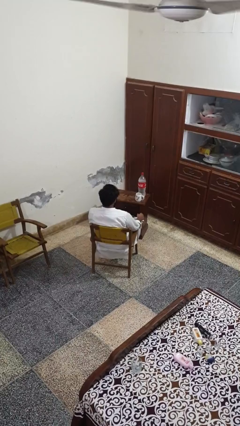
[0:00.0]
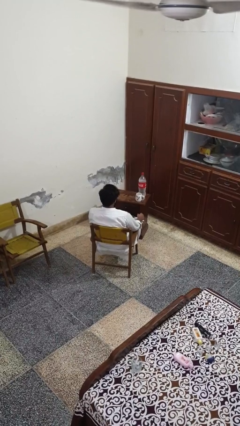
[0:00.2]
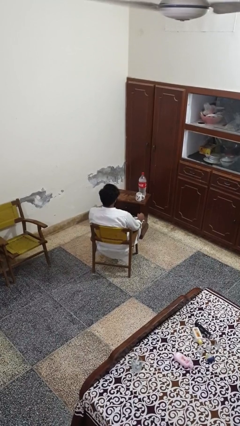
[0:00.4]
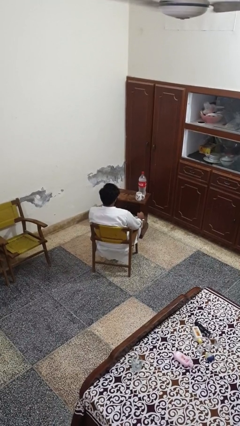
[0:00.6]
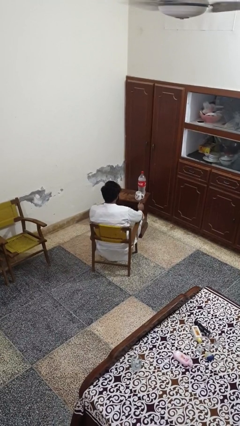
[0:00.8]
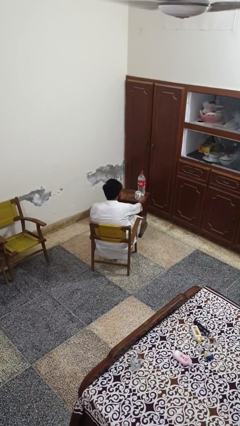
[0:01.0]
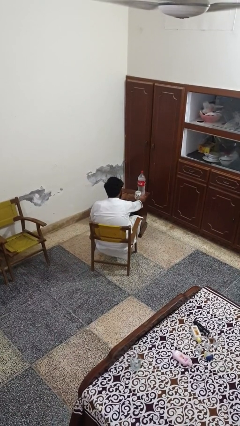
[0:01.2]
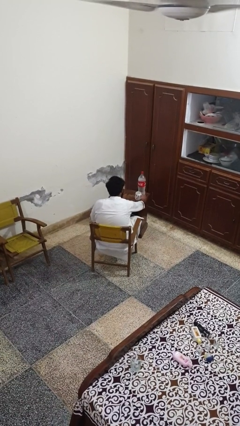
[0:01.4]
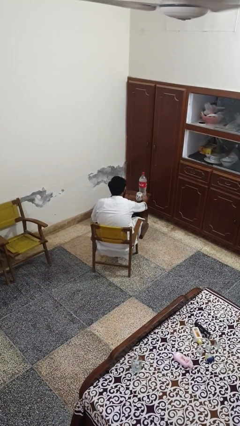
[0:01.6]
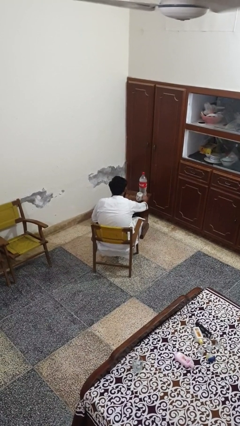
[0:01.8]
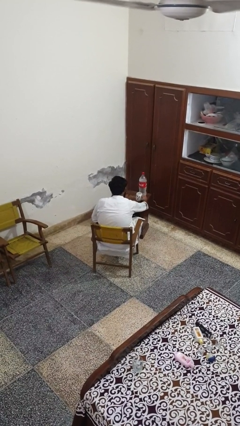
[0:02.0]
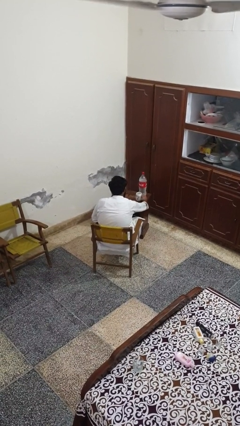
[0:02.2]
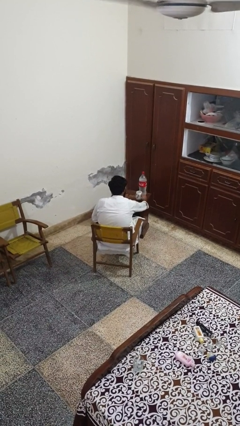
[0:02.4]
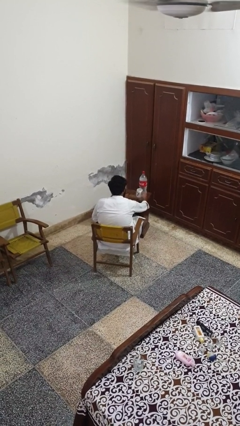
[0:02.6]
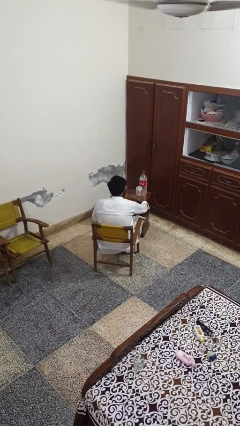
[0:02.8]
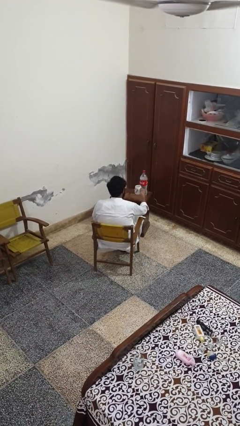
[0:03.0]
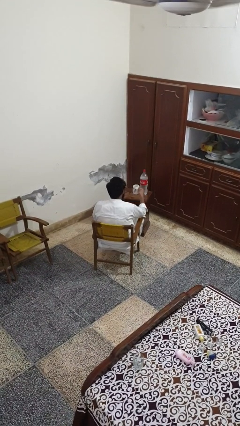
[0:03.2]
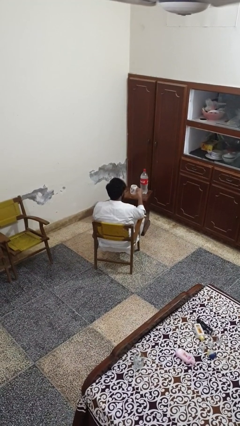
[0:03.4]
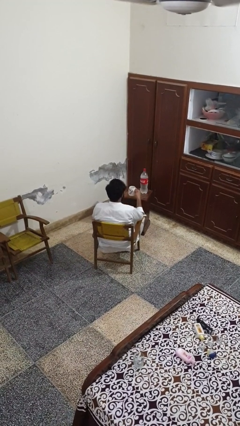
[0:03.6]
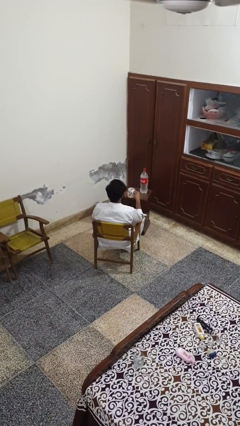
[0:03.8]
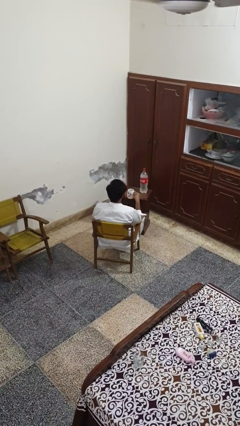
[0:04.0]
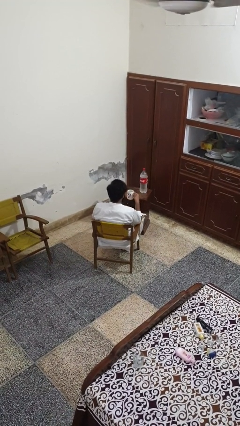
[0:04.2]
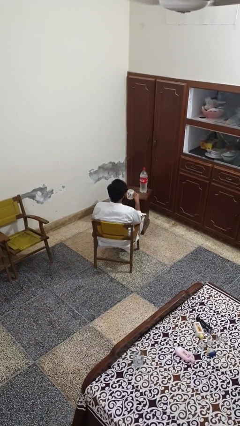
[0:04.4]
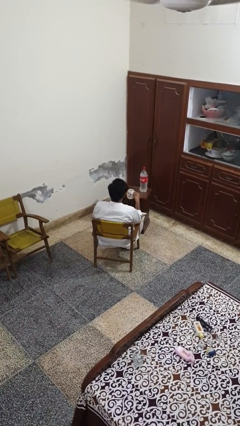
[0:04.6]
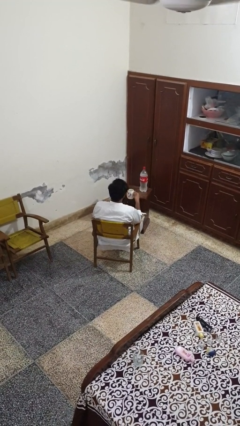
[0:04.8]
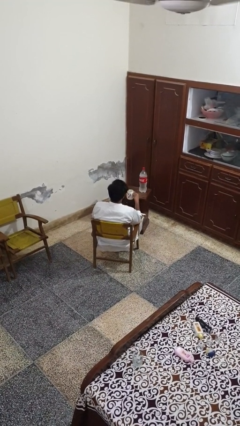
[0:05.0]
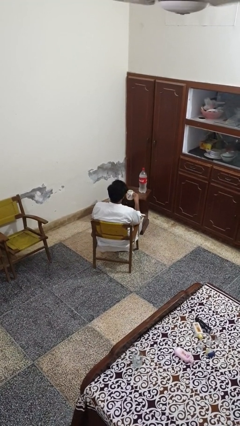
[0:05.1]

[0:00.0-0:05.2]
person picks up object from table

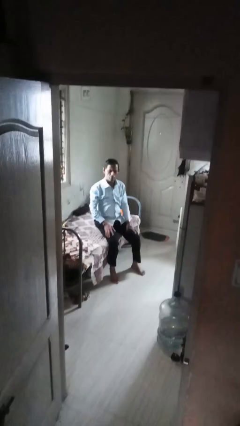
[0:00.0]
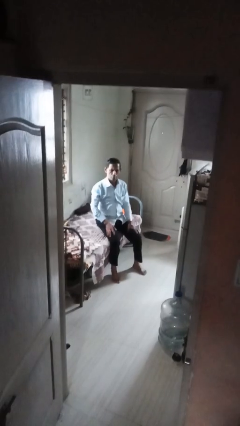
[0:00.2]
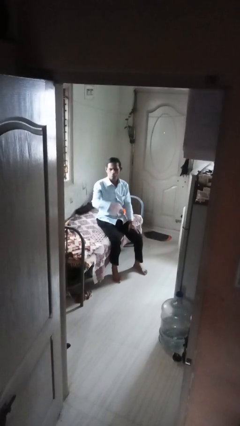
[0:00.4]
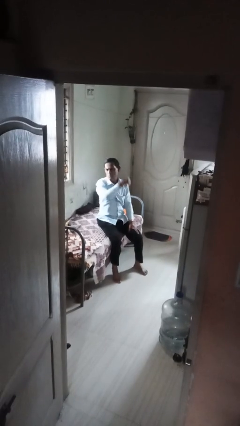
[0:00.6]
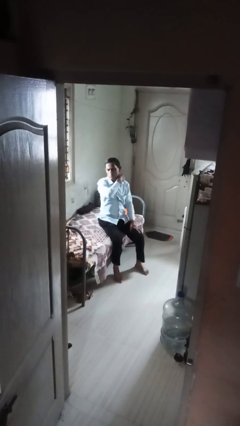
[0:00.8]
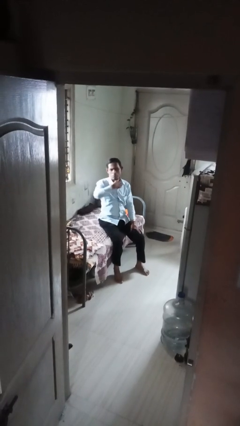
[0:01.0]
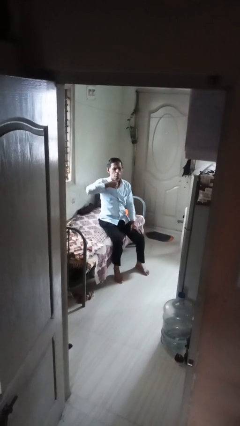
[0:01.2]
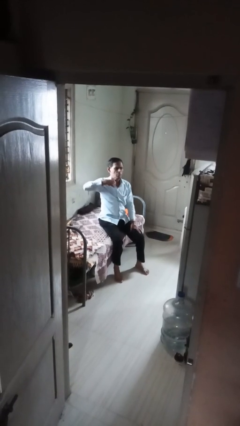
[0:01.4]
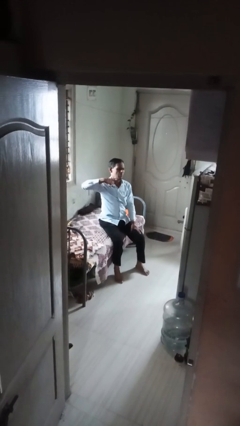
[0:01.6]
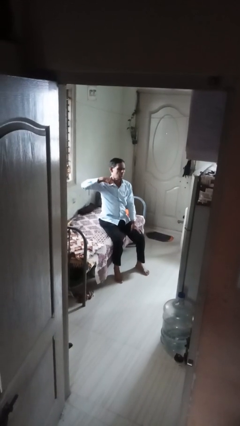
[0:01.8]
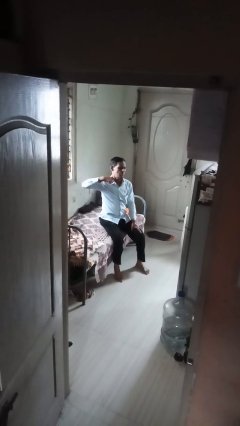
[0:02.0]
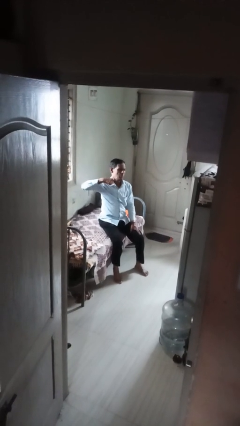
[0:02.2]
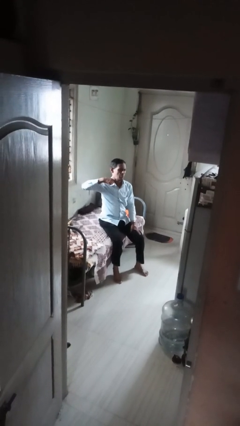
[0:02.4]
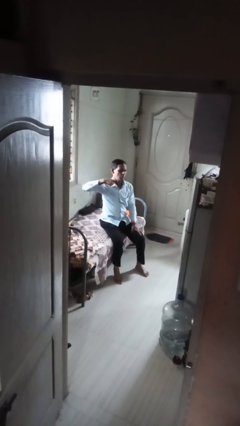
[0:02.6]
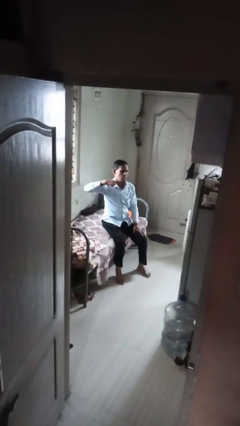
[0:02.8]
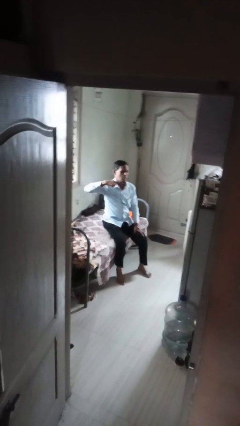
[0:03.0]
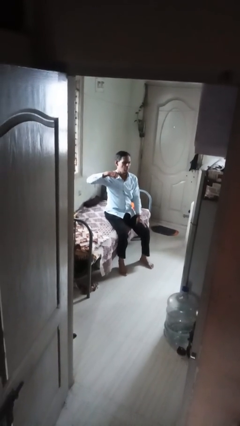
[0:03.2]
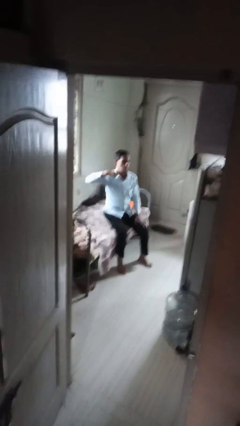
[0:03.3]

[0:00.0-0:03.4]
person gestures cut

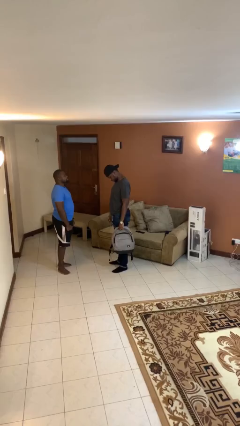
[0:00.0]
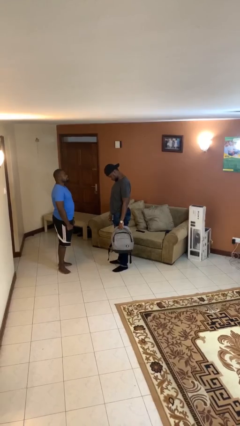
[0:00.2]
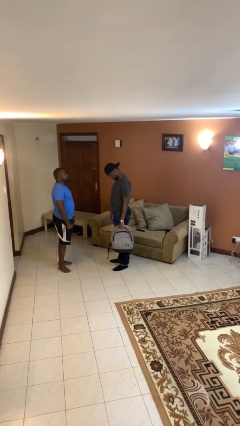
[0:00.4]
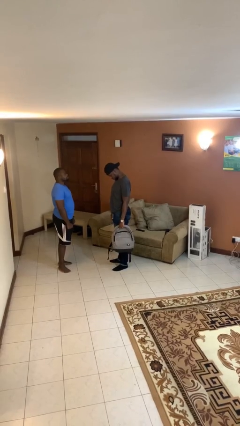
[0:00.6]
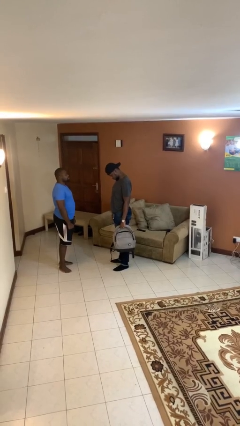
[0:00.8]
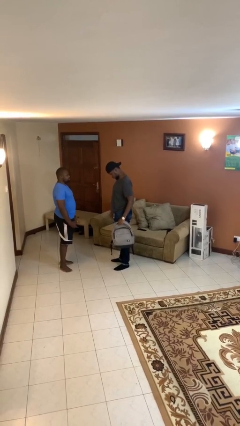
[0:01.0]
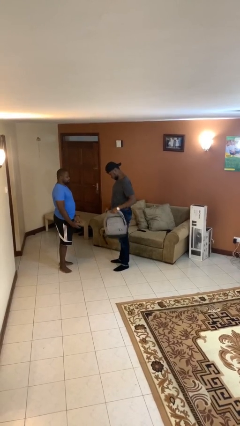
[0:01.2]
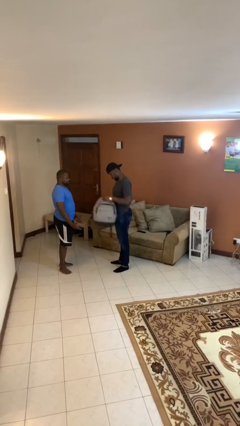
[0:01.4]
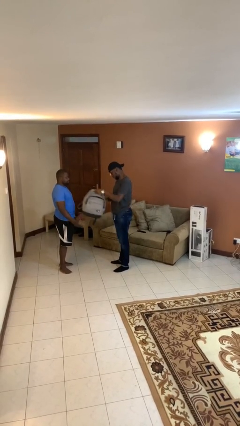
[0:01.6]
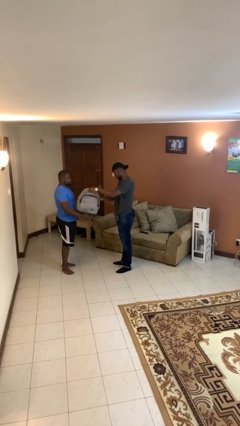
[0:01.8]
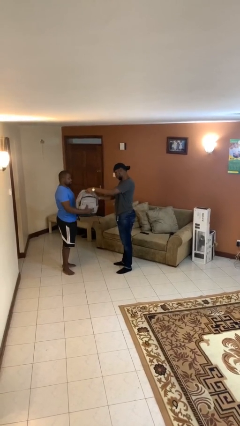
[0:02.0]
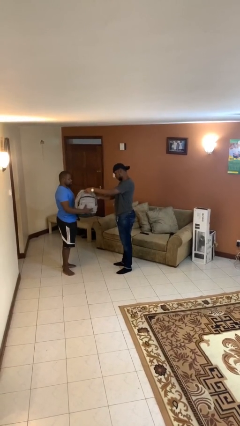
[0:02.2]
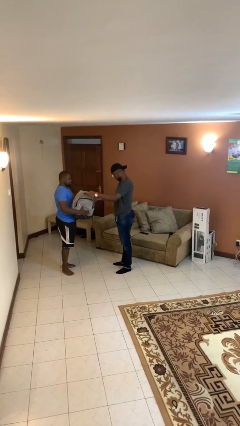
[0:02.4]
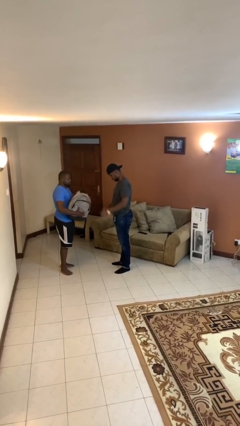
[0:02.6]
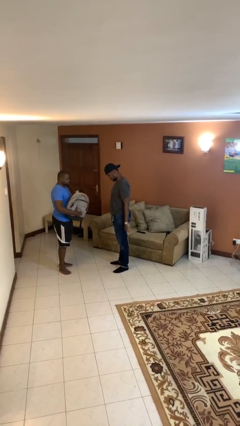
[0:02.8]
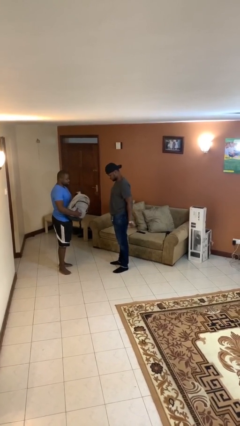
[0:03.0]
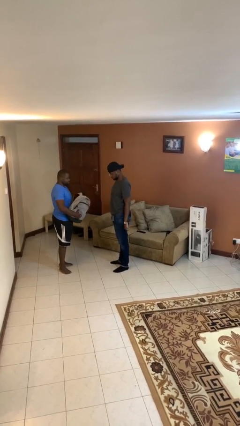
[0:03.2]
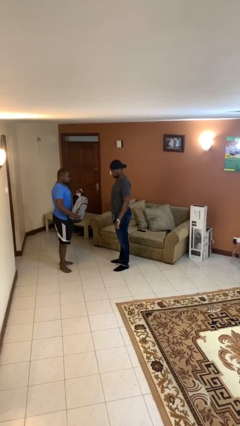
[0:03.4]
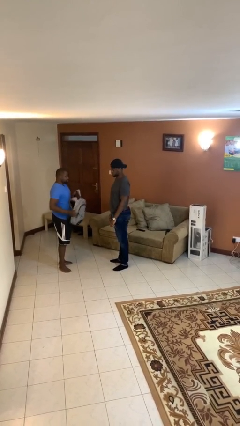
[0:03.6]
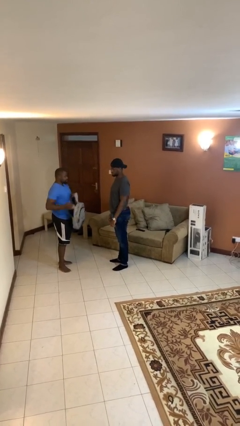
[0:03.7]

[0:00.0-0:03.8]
person transfers object to person

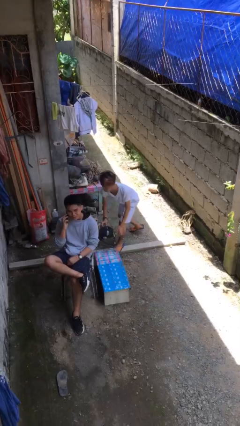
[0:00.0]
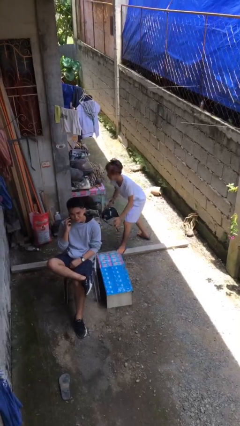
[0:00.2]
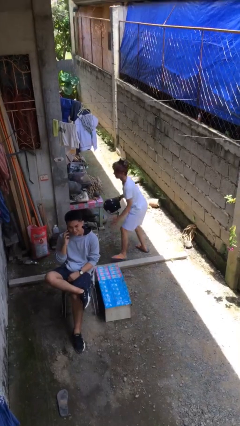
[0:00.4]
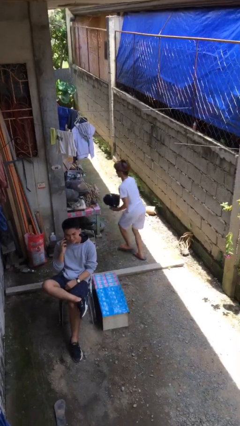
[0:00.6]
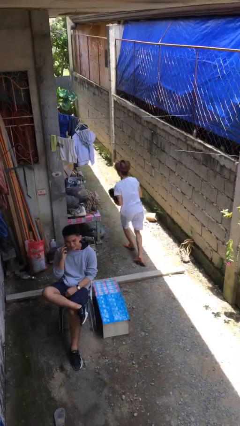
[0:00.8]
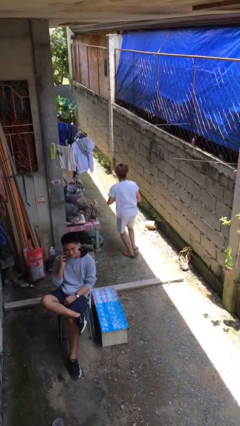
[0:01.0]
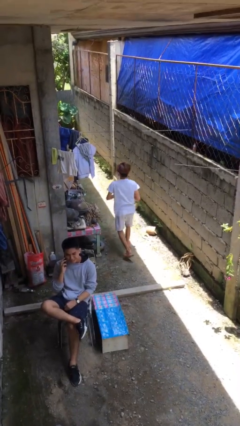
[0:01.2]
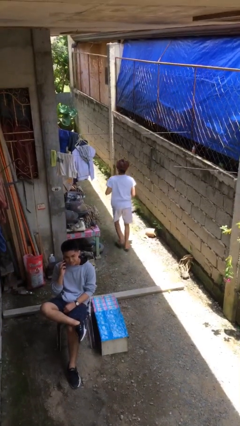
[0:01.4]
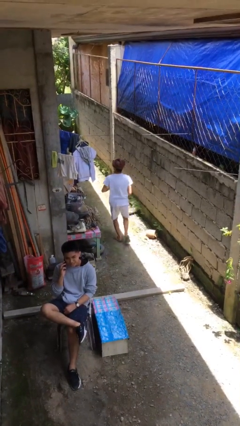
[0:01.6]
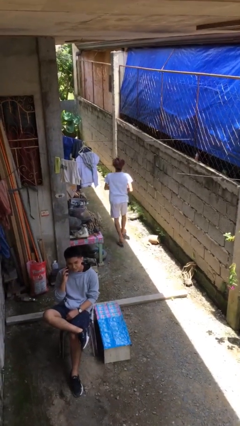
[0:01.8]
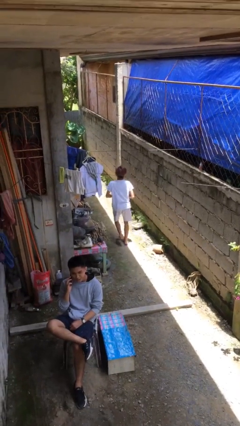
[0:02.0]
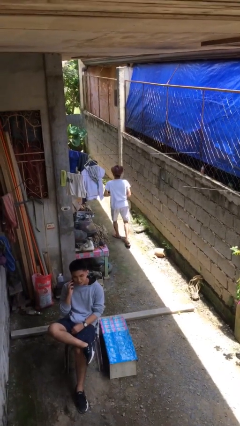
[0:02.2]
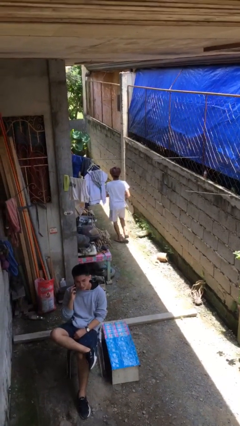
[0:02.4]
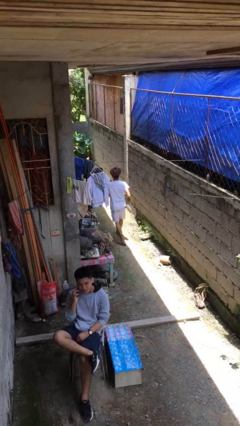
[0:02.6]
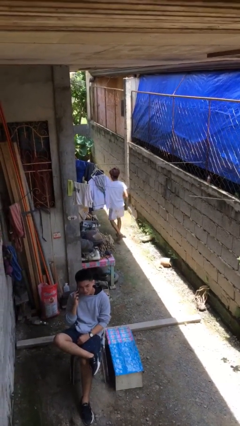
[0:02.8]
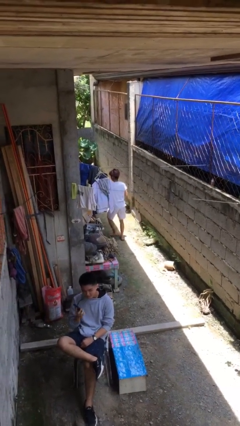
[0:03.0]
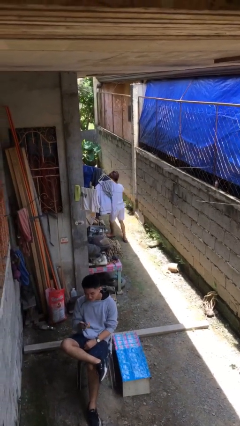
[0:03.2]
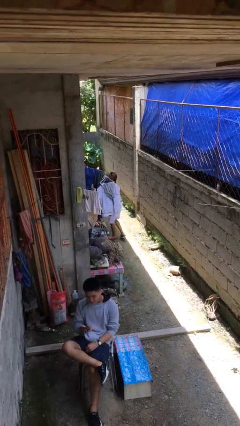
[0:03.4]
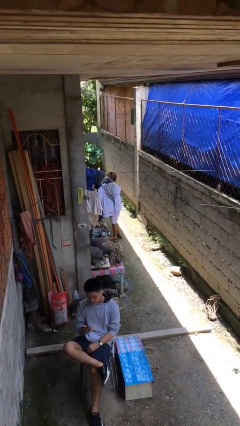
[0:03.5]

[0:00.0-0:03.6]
person steals object from person

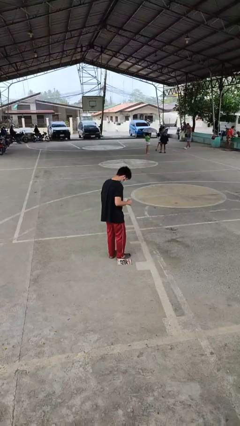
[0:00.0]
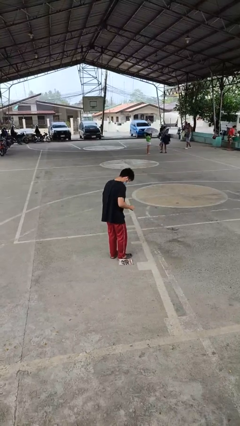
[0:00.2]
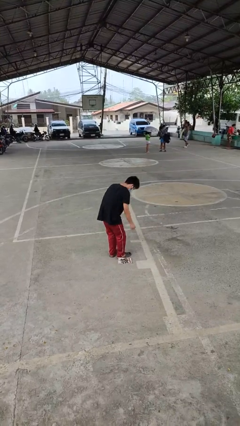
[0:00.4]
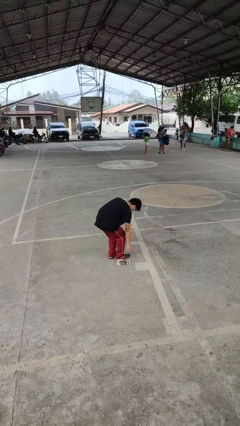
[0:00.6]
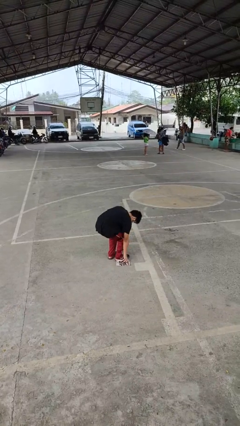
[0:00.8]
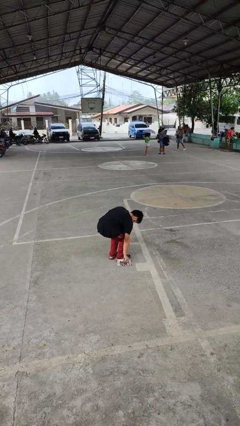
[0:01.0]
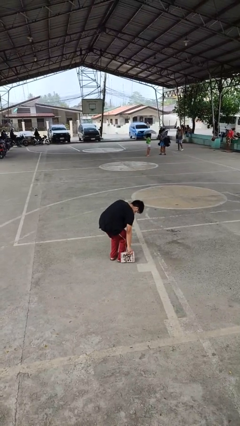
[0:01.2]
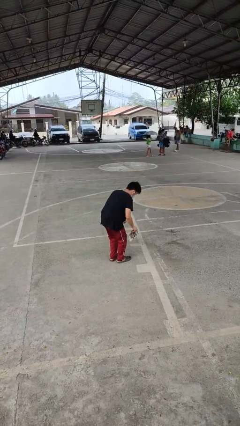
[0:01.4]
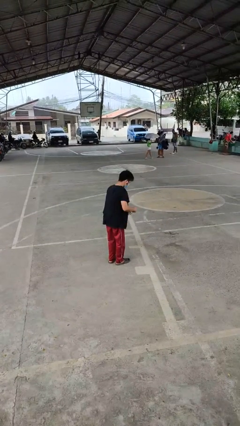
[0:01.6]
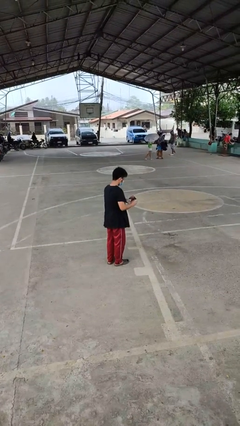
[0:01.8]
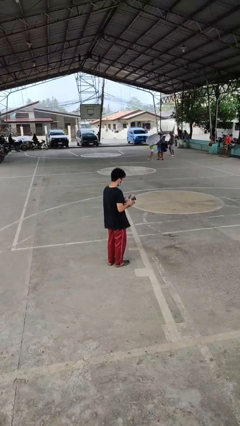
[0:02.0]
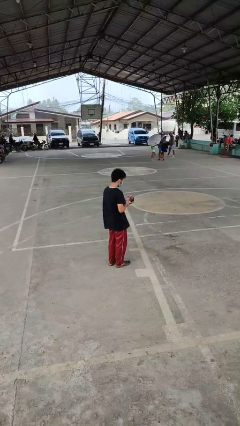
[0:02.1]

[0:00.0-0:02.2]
person picks up object from floor
